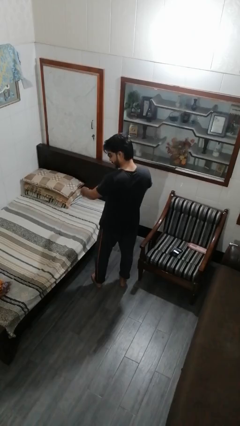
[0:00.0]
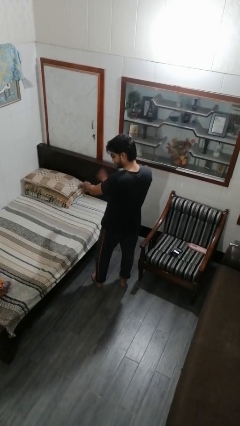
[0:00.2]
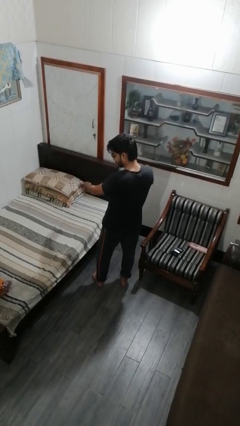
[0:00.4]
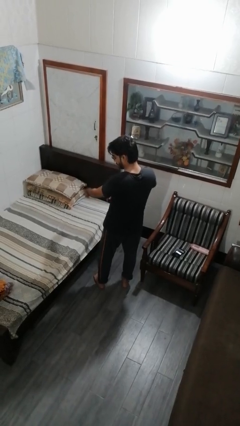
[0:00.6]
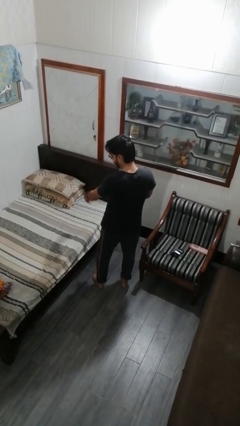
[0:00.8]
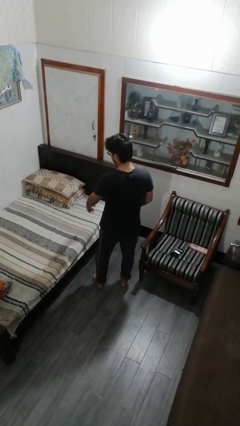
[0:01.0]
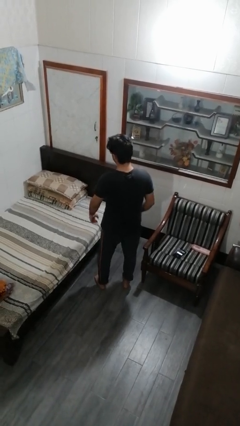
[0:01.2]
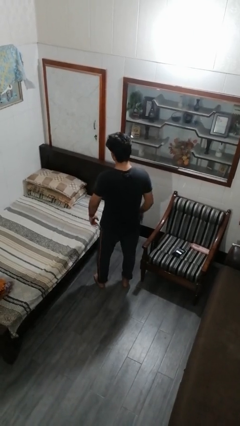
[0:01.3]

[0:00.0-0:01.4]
person swats bug

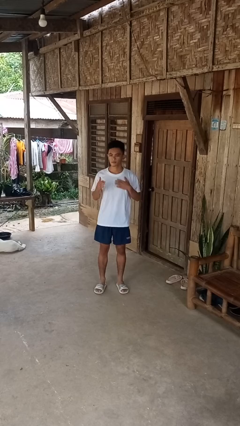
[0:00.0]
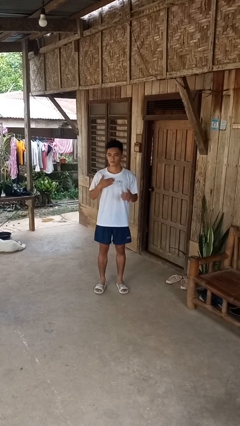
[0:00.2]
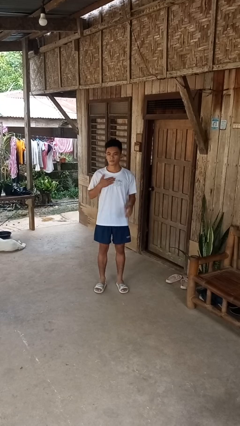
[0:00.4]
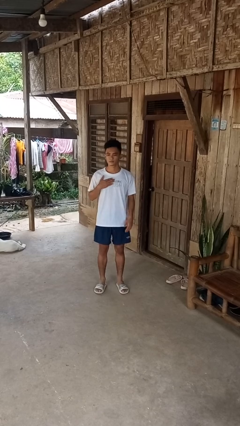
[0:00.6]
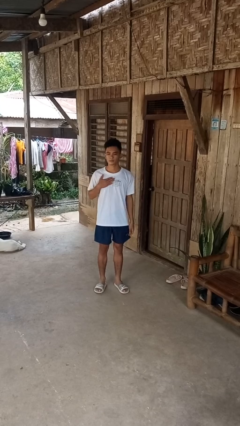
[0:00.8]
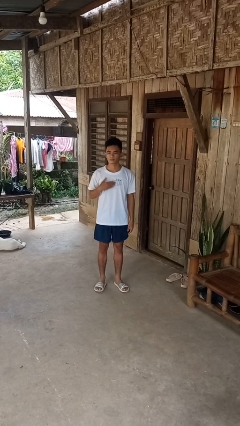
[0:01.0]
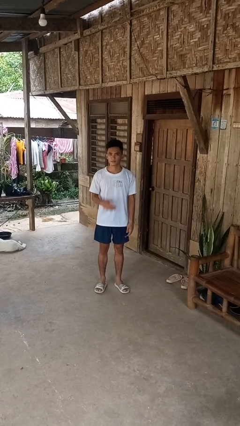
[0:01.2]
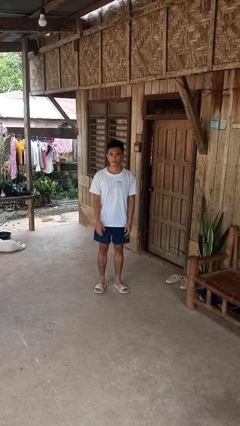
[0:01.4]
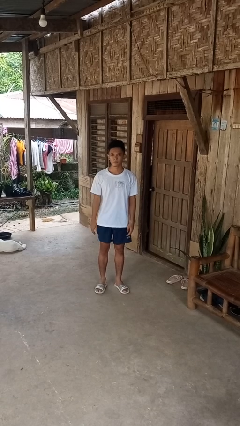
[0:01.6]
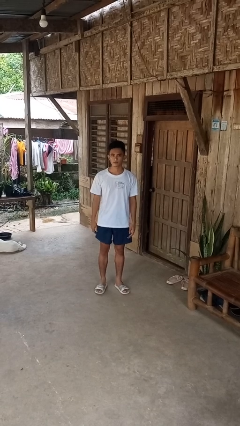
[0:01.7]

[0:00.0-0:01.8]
person drums on chest

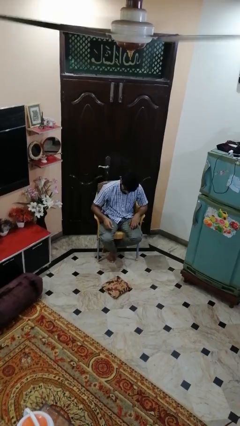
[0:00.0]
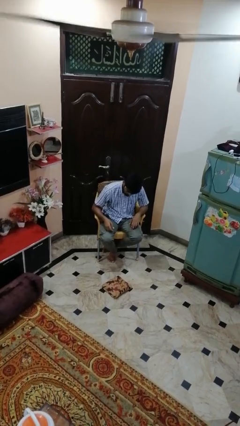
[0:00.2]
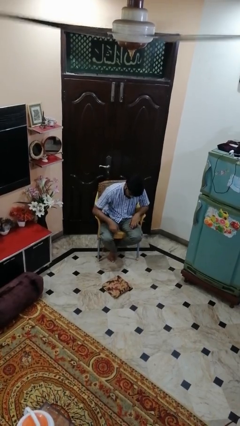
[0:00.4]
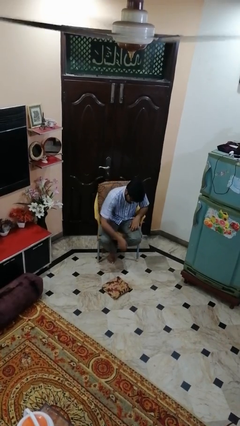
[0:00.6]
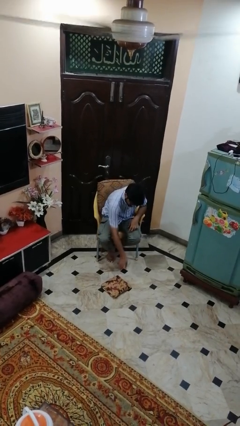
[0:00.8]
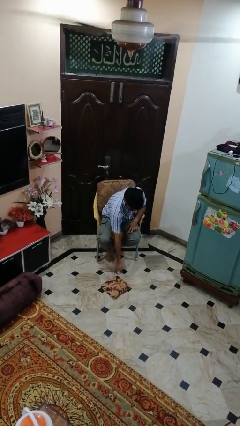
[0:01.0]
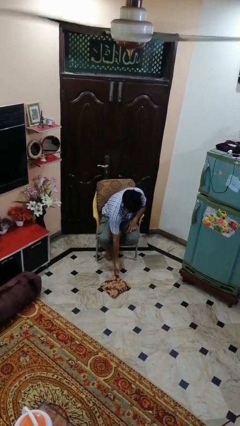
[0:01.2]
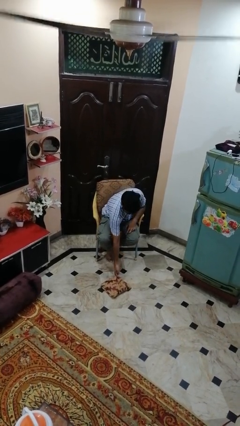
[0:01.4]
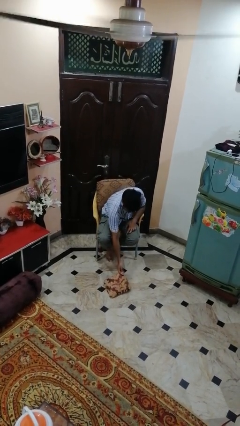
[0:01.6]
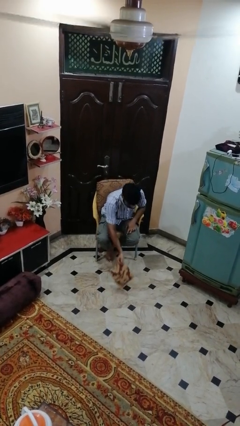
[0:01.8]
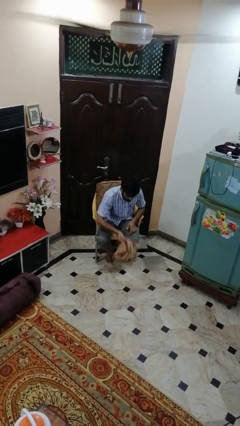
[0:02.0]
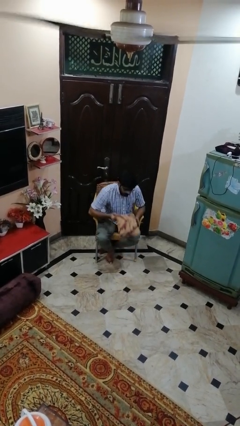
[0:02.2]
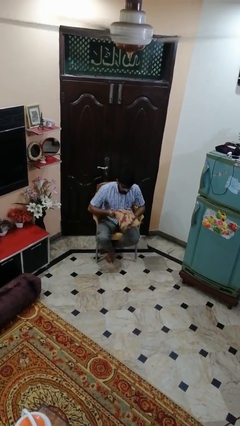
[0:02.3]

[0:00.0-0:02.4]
person picks up object from floor

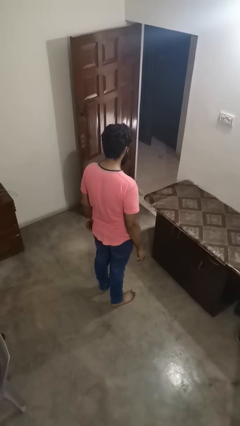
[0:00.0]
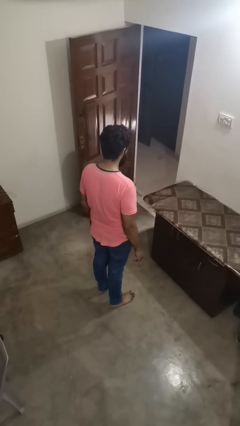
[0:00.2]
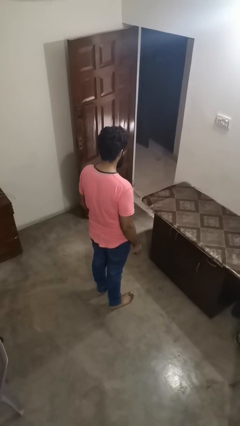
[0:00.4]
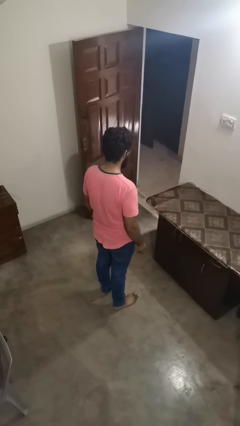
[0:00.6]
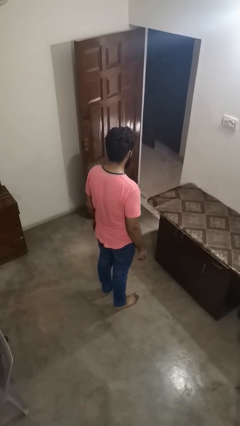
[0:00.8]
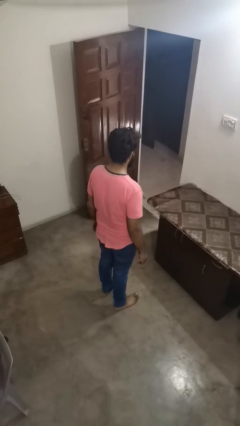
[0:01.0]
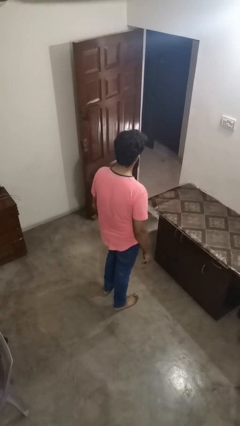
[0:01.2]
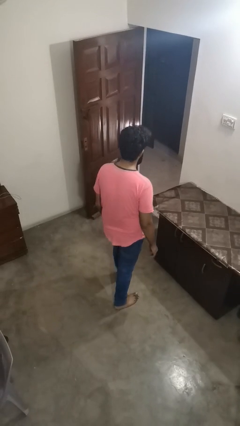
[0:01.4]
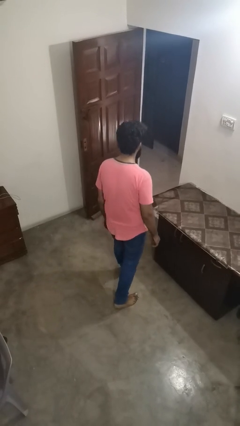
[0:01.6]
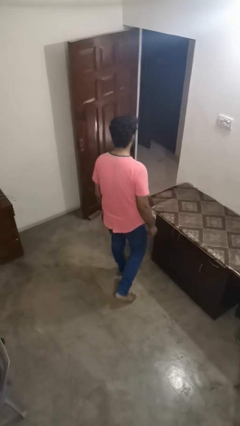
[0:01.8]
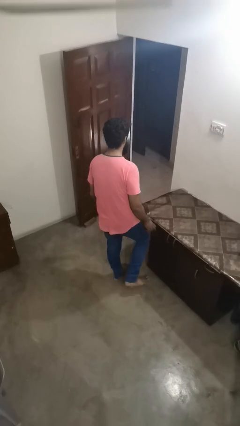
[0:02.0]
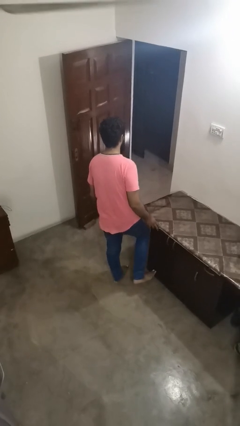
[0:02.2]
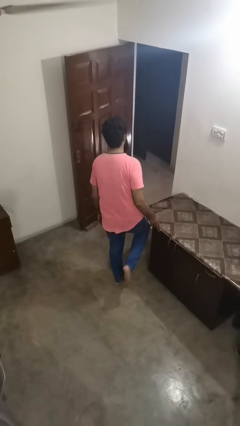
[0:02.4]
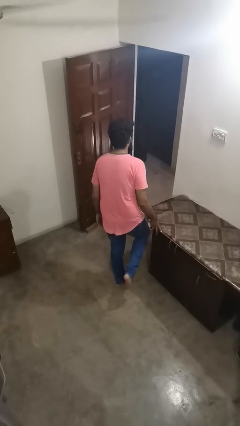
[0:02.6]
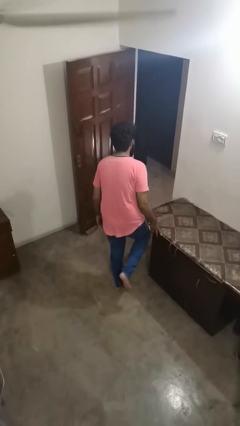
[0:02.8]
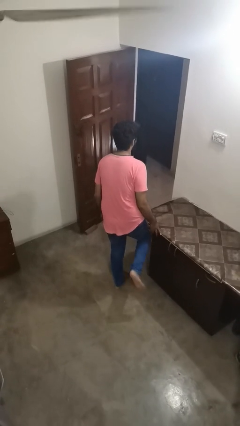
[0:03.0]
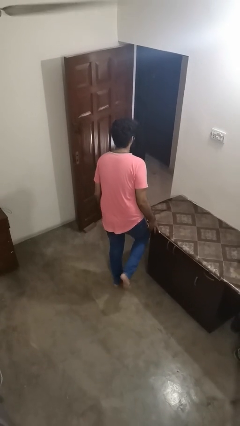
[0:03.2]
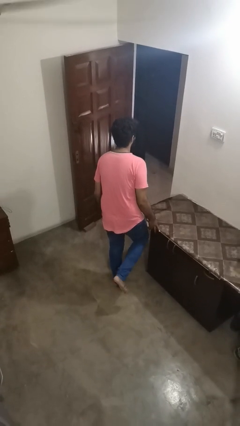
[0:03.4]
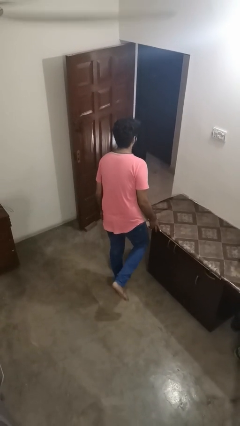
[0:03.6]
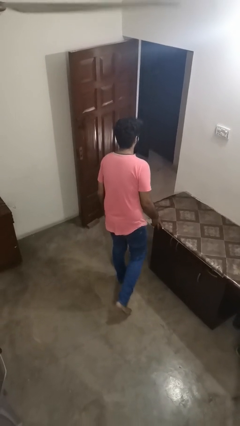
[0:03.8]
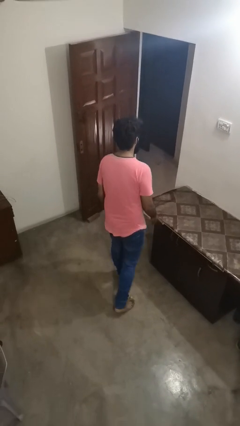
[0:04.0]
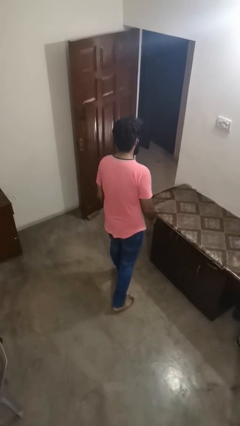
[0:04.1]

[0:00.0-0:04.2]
person bumps into table

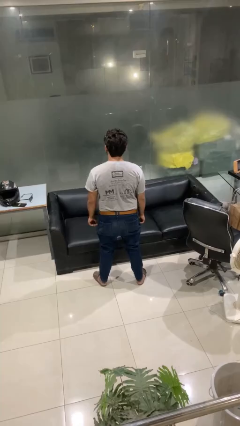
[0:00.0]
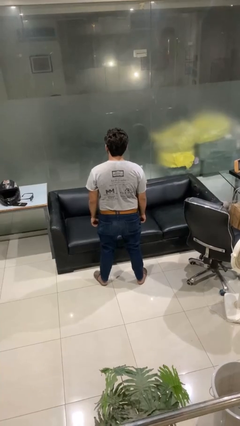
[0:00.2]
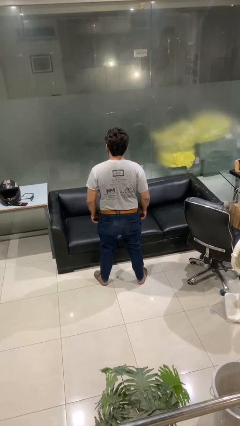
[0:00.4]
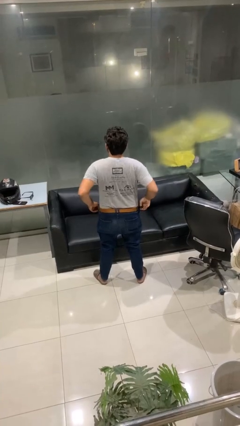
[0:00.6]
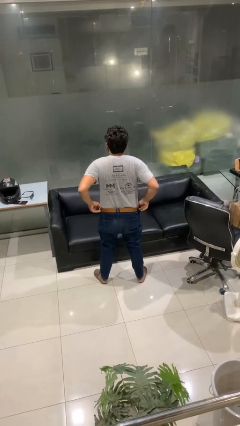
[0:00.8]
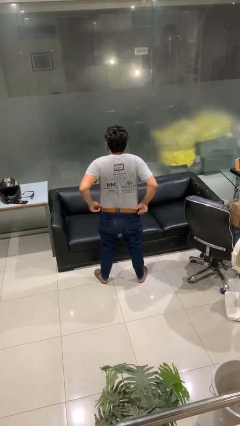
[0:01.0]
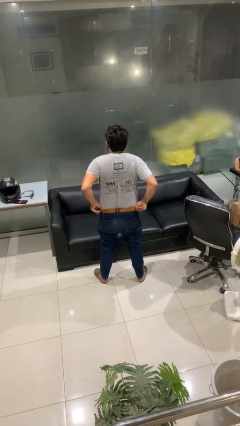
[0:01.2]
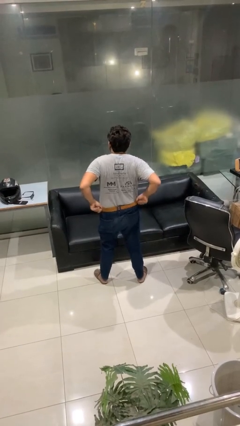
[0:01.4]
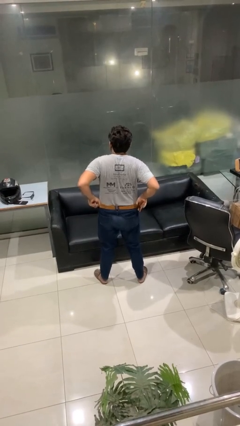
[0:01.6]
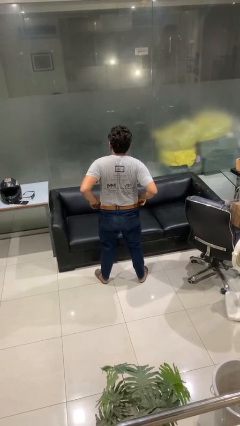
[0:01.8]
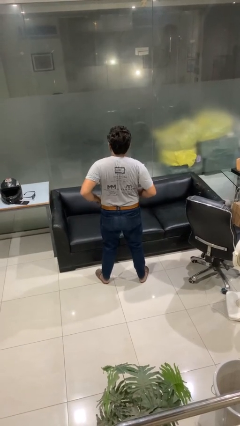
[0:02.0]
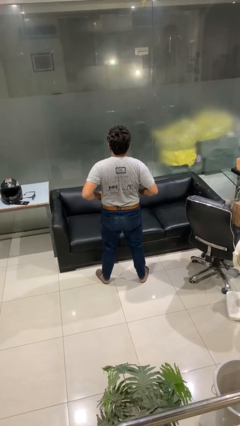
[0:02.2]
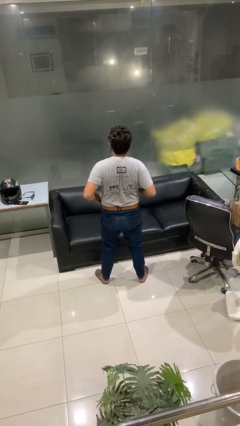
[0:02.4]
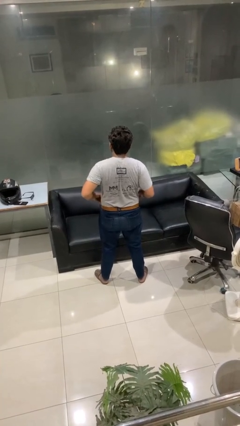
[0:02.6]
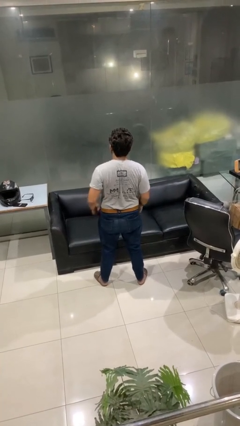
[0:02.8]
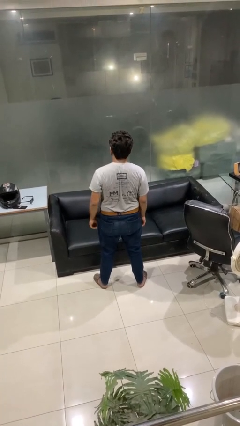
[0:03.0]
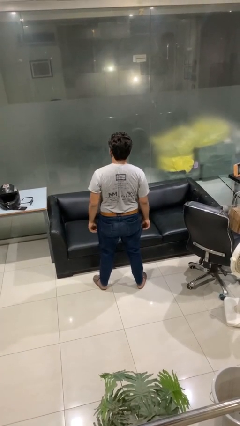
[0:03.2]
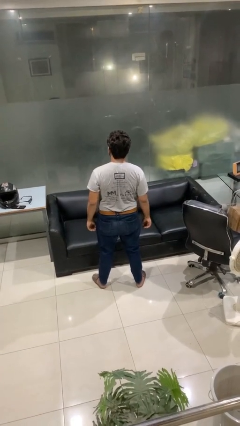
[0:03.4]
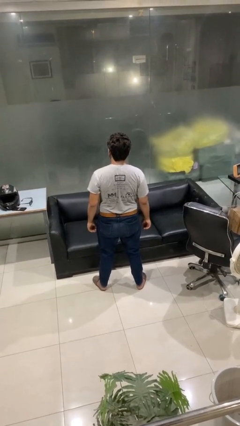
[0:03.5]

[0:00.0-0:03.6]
person hikes up pants

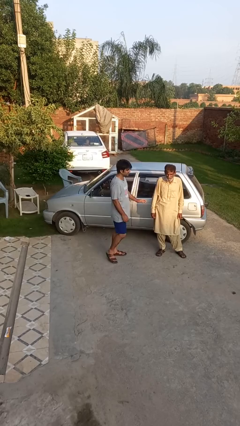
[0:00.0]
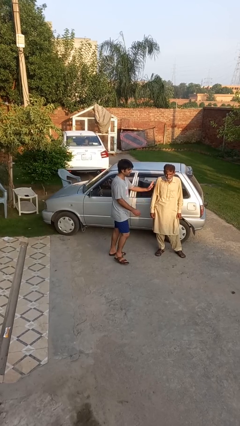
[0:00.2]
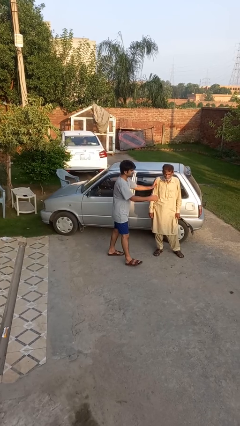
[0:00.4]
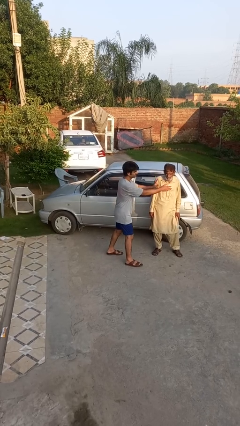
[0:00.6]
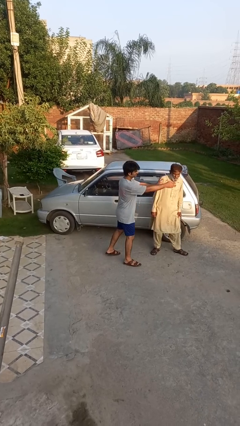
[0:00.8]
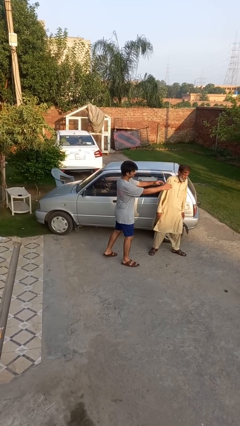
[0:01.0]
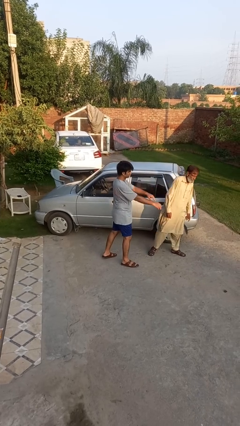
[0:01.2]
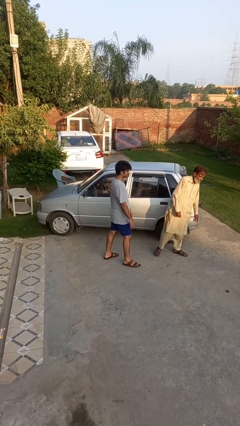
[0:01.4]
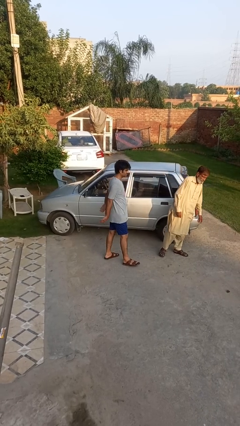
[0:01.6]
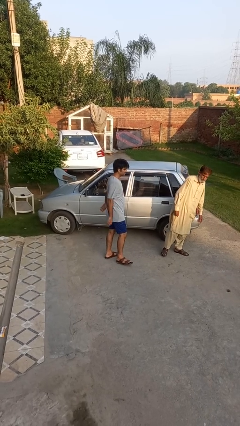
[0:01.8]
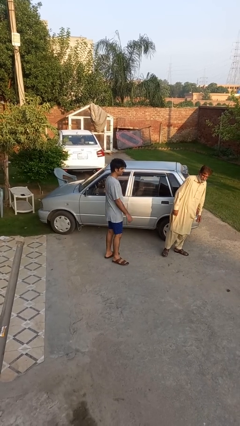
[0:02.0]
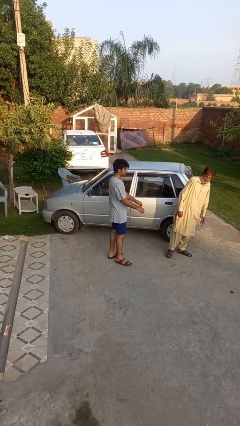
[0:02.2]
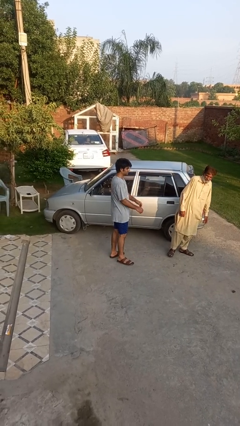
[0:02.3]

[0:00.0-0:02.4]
person shoves person

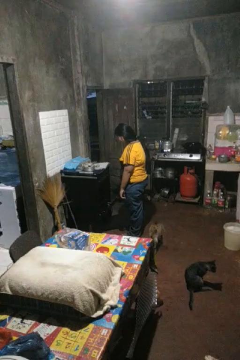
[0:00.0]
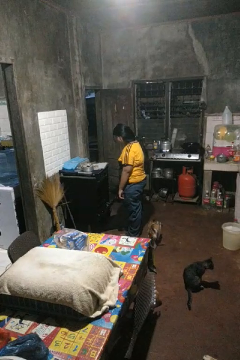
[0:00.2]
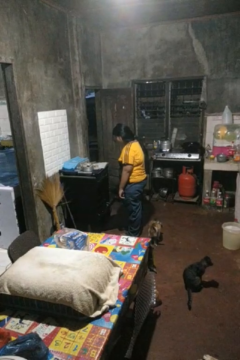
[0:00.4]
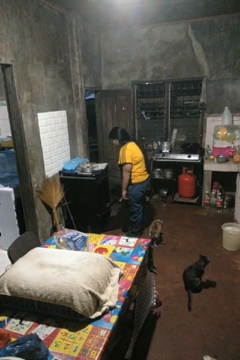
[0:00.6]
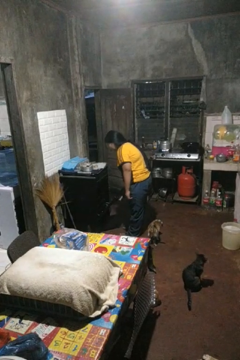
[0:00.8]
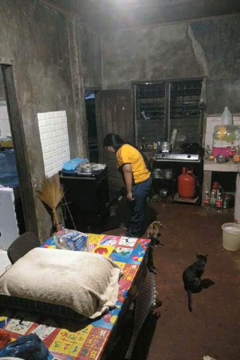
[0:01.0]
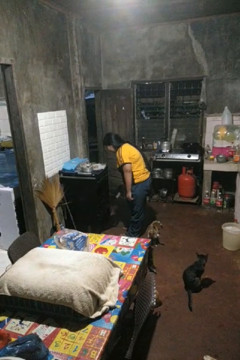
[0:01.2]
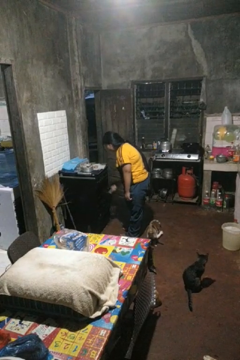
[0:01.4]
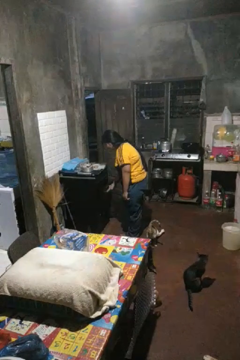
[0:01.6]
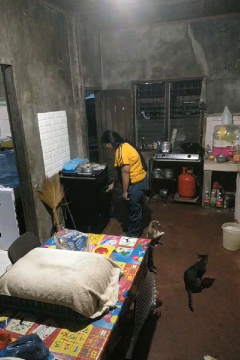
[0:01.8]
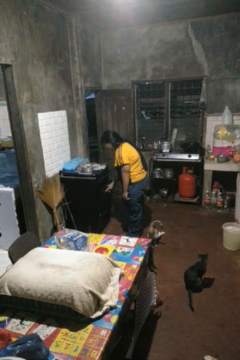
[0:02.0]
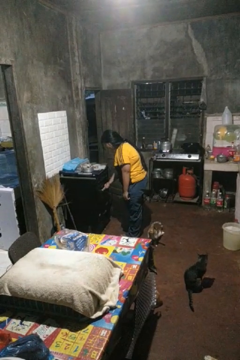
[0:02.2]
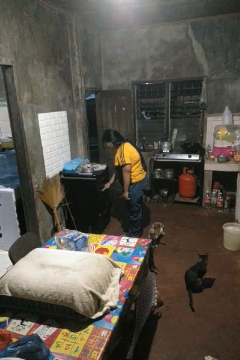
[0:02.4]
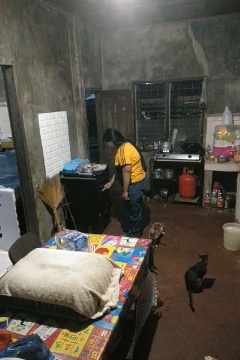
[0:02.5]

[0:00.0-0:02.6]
person closes oven door
